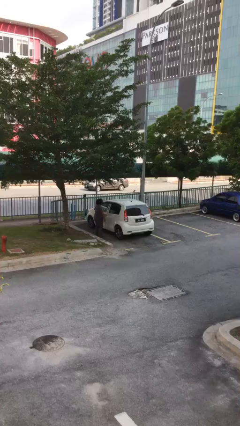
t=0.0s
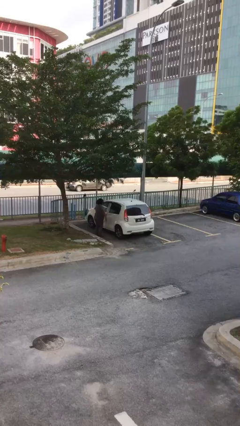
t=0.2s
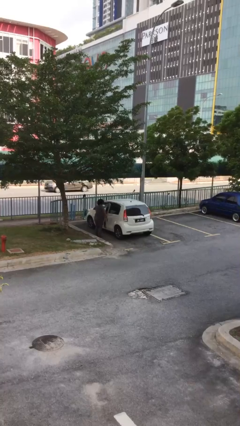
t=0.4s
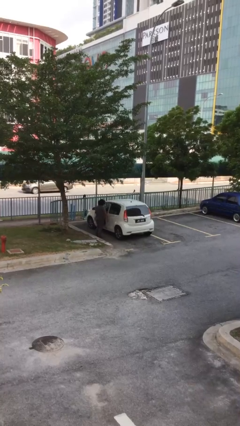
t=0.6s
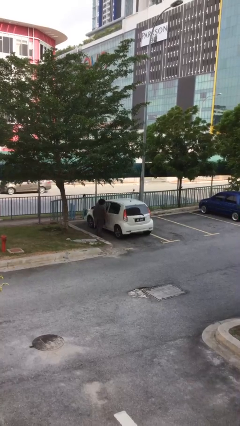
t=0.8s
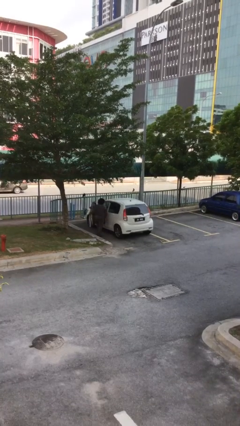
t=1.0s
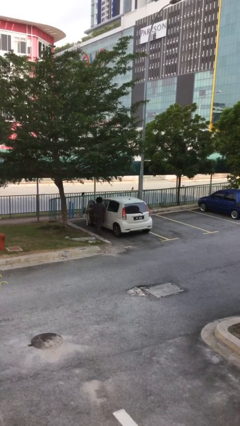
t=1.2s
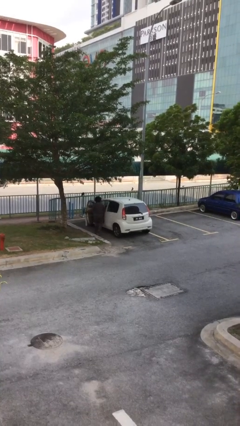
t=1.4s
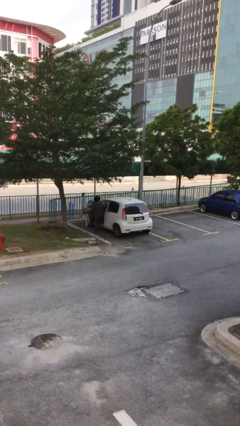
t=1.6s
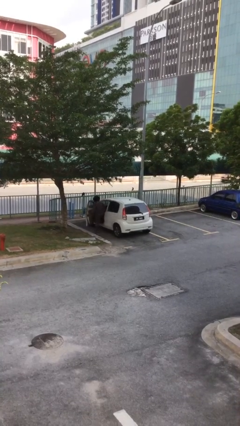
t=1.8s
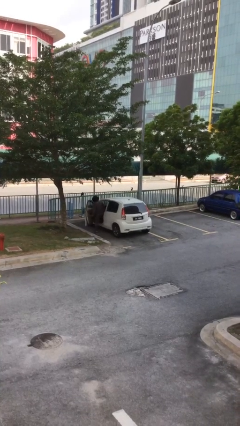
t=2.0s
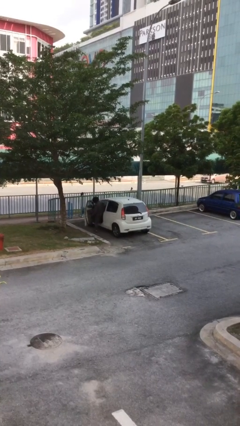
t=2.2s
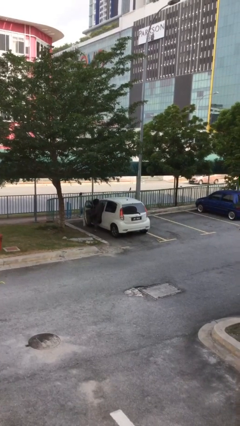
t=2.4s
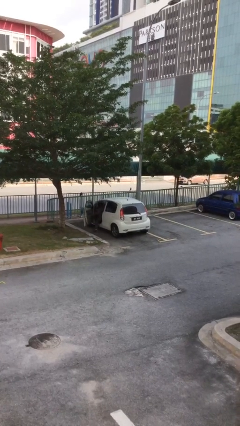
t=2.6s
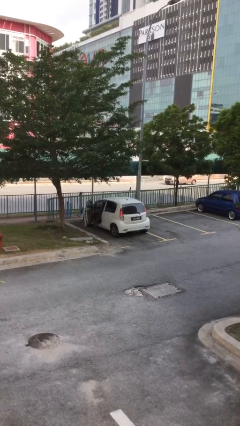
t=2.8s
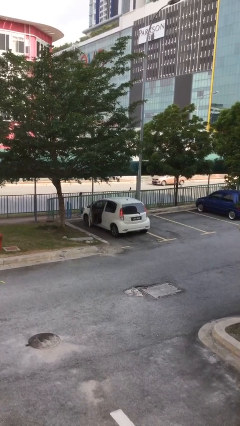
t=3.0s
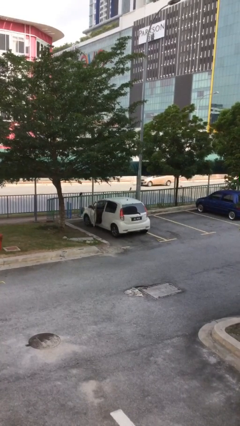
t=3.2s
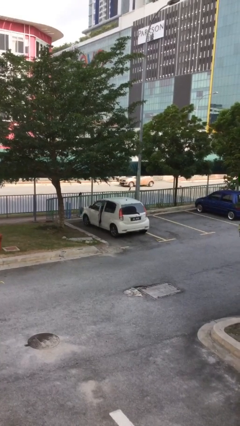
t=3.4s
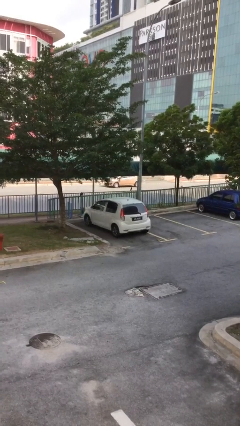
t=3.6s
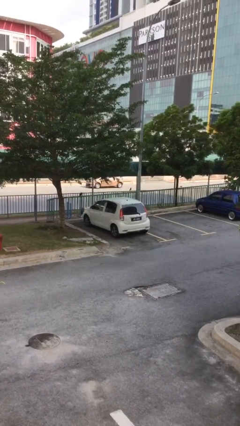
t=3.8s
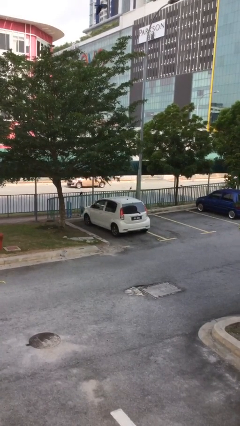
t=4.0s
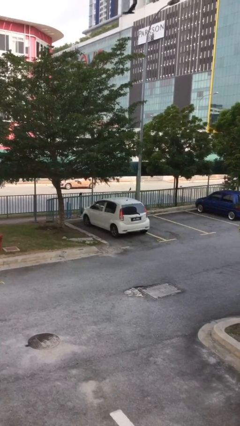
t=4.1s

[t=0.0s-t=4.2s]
car picks up person

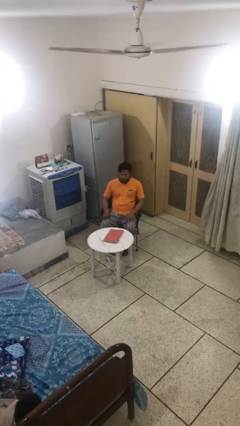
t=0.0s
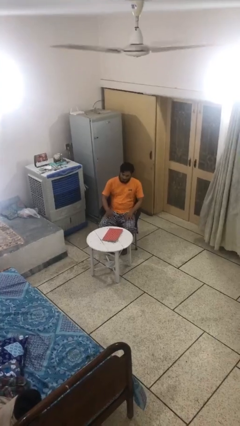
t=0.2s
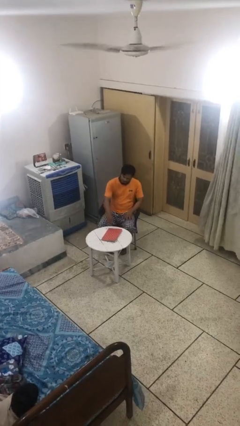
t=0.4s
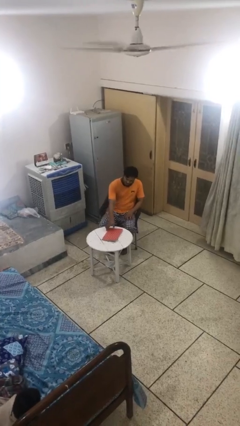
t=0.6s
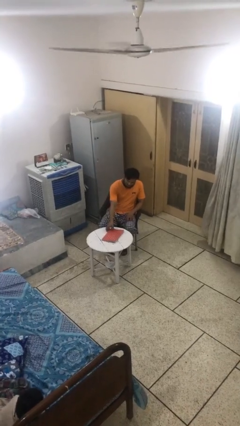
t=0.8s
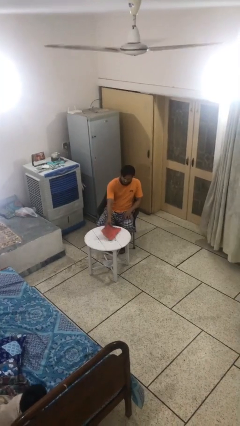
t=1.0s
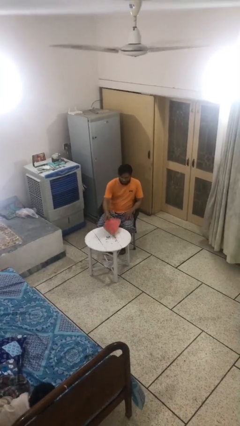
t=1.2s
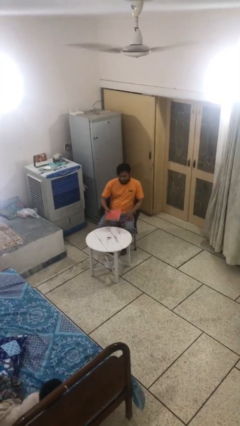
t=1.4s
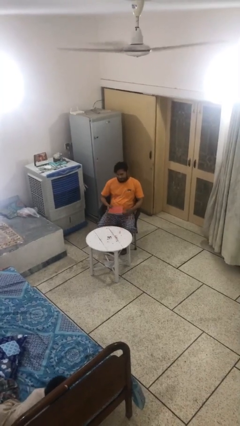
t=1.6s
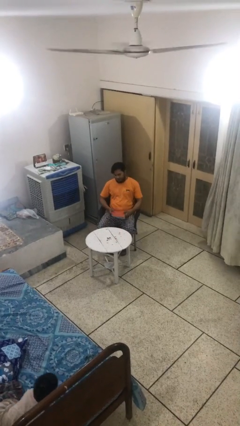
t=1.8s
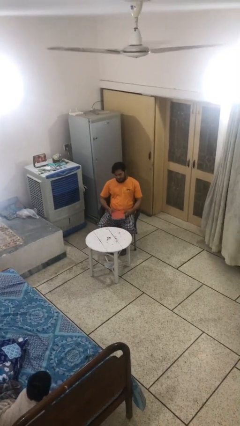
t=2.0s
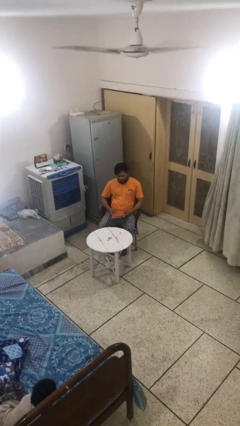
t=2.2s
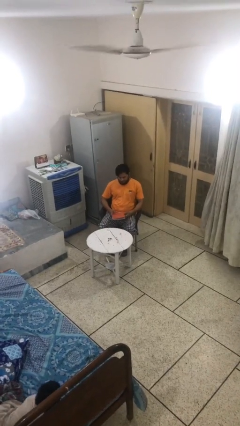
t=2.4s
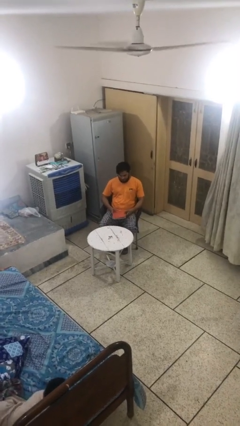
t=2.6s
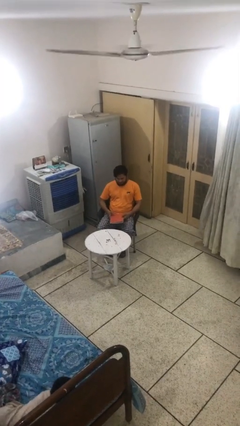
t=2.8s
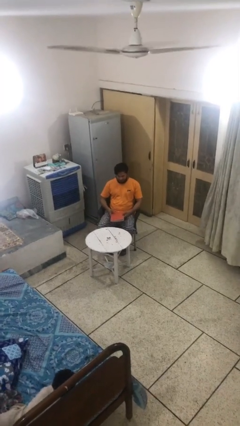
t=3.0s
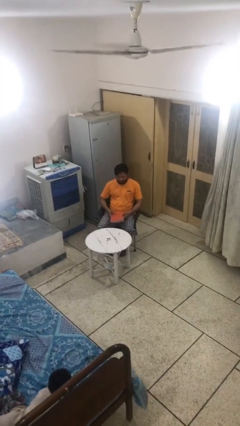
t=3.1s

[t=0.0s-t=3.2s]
person picks up object from table

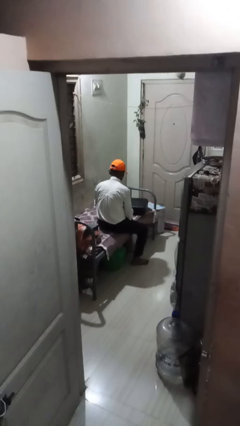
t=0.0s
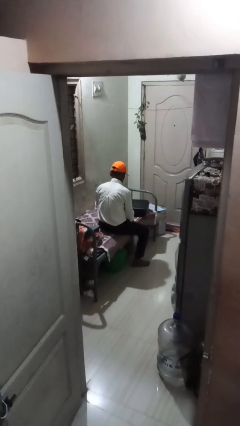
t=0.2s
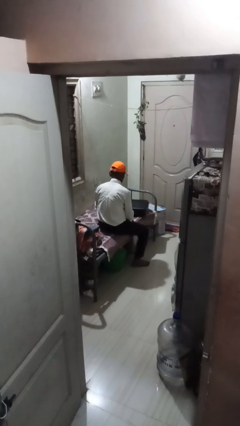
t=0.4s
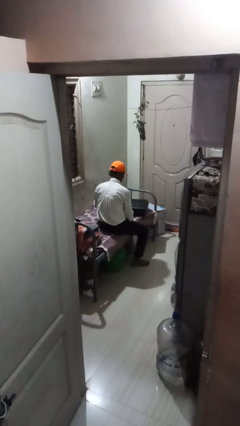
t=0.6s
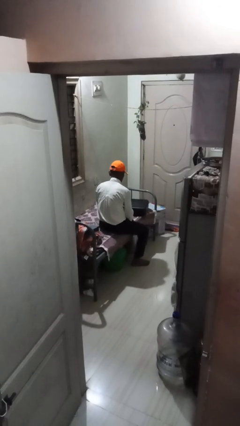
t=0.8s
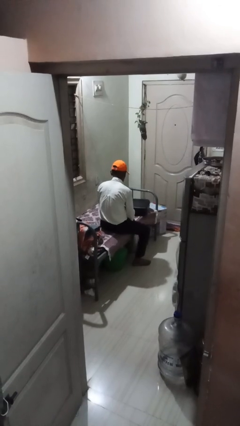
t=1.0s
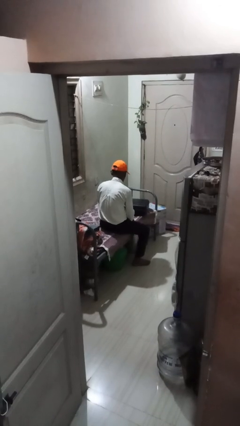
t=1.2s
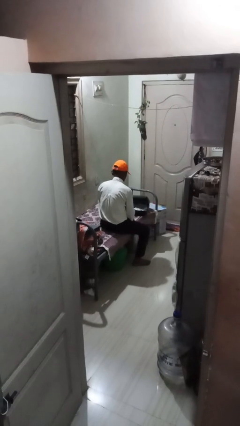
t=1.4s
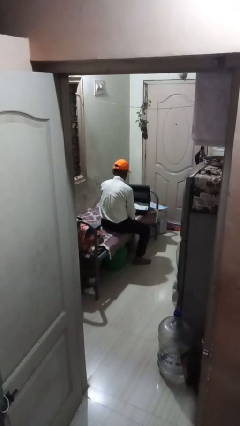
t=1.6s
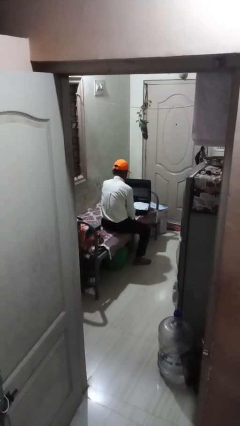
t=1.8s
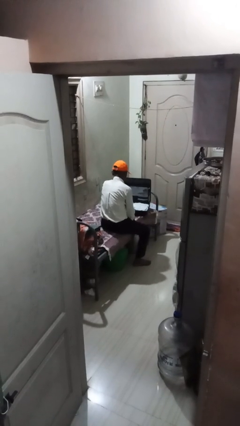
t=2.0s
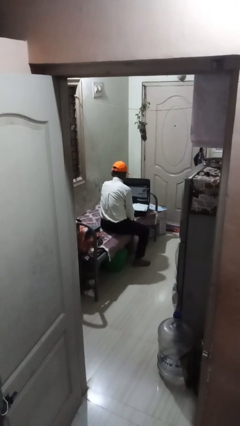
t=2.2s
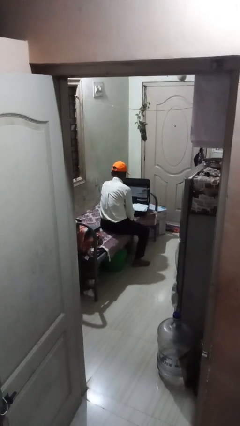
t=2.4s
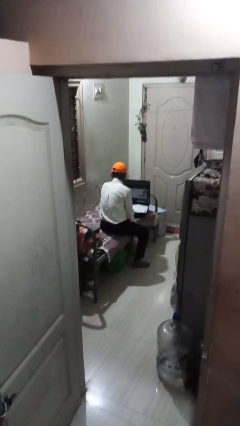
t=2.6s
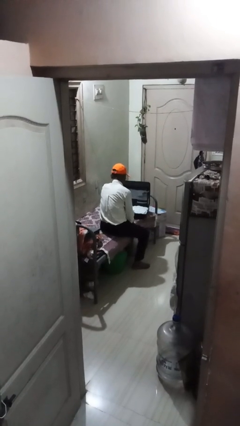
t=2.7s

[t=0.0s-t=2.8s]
person opens suitcase

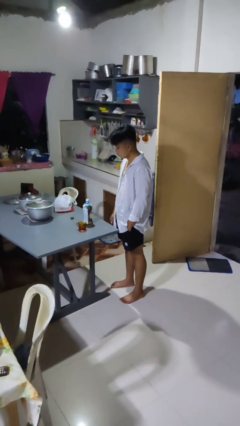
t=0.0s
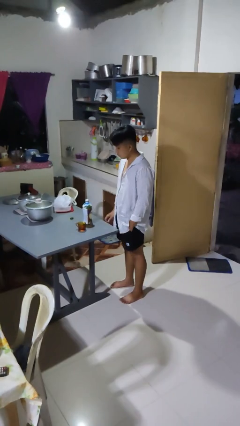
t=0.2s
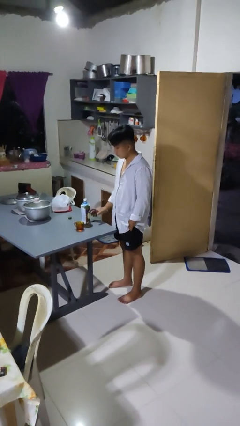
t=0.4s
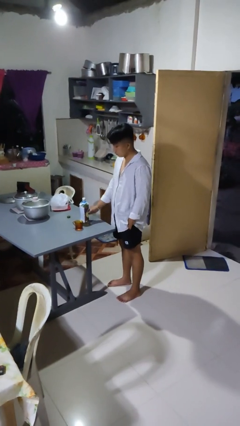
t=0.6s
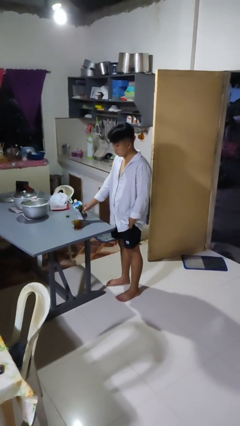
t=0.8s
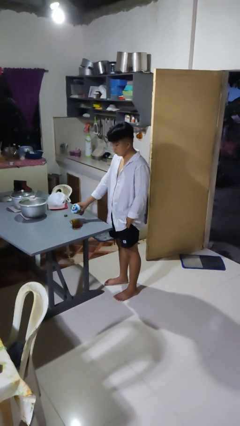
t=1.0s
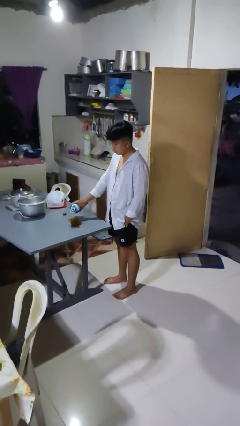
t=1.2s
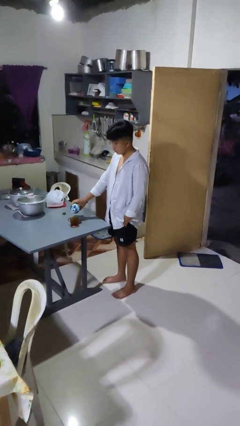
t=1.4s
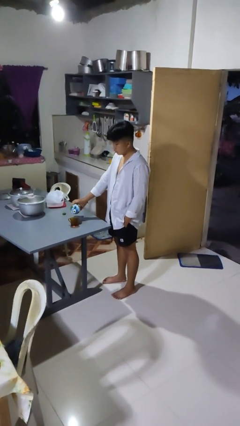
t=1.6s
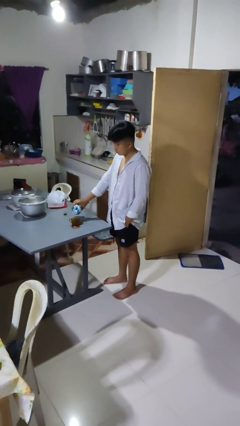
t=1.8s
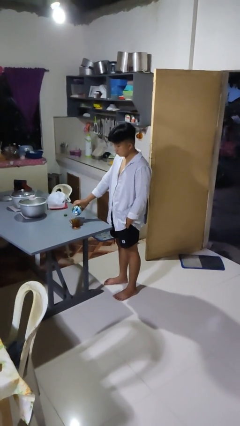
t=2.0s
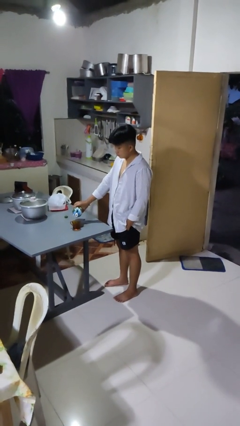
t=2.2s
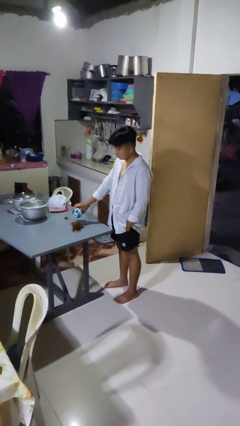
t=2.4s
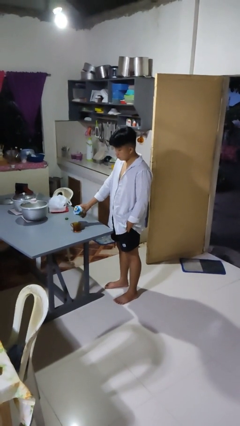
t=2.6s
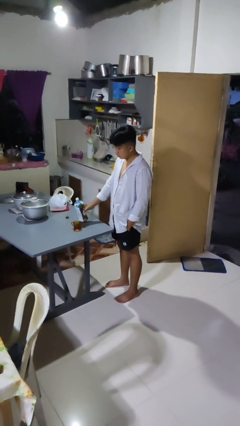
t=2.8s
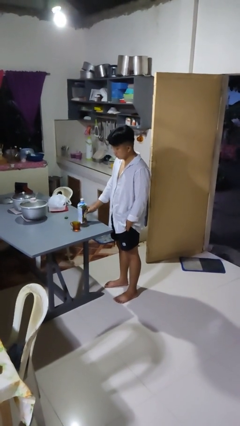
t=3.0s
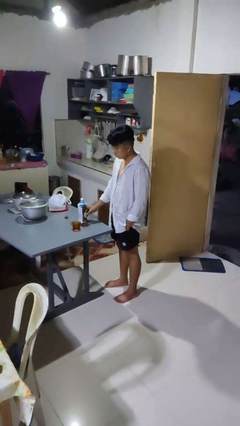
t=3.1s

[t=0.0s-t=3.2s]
person pours liquid into cup

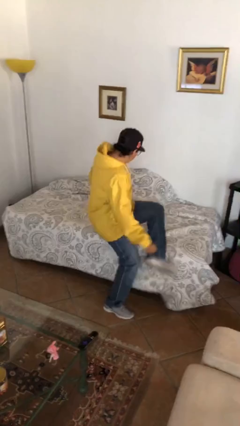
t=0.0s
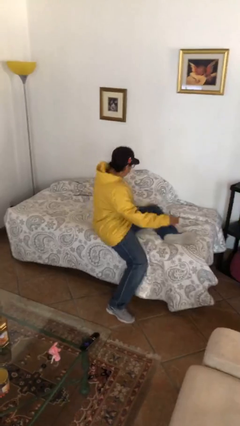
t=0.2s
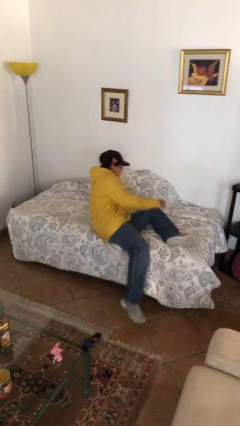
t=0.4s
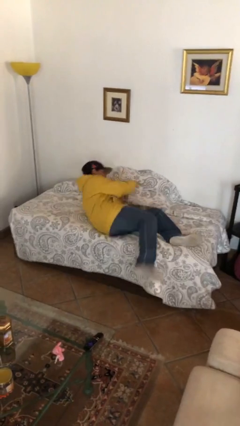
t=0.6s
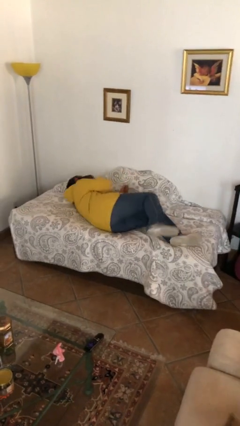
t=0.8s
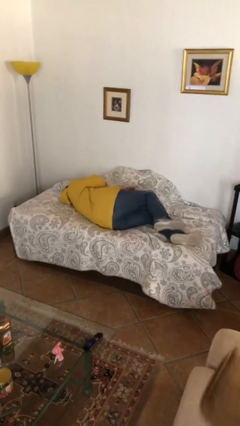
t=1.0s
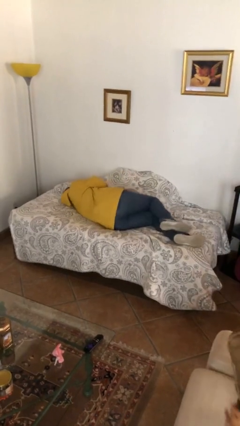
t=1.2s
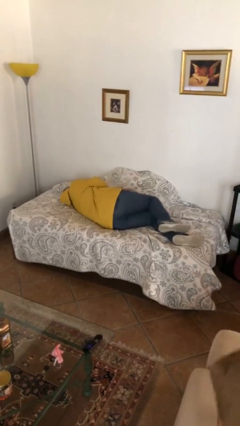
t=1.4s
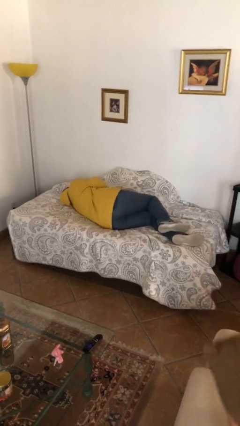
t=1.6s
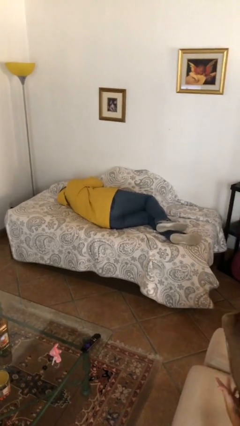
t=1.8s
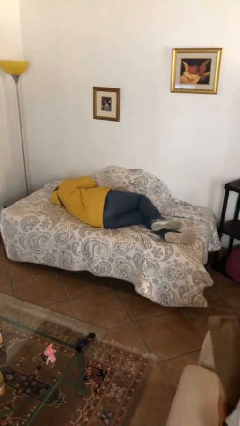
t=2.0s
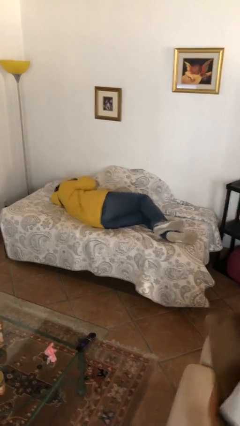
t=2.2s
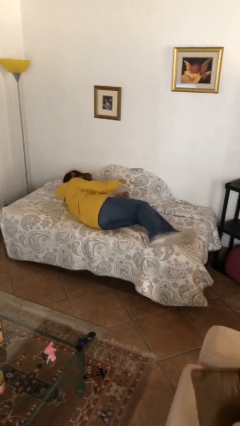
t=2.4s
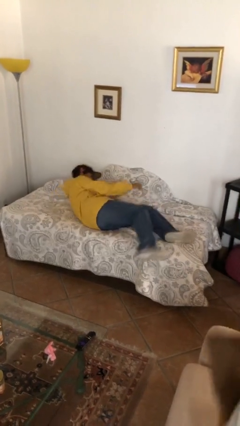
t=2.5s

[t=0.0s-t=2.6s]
person lies down on bed

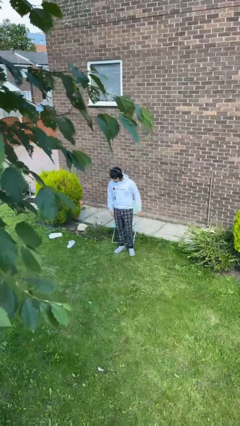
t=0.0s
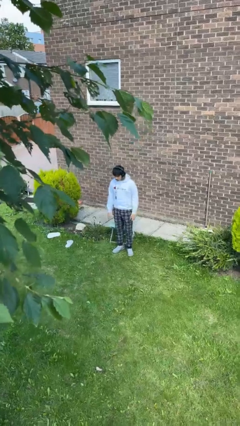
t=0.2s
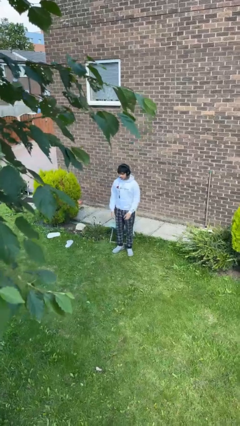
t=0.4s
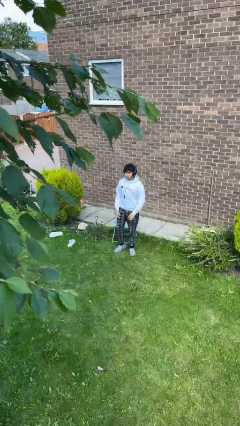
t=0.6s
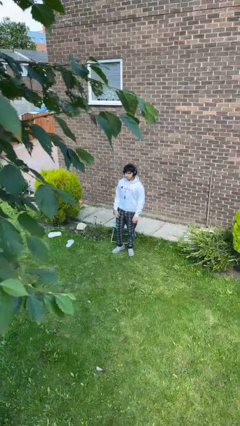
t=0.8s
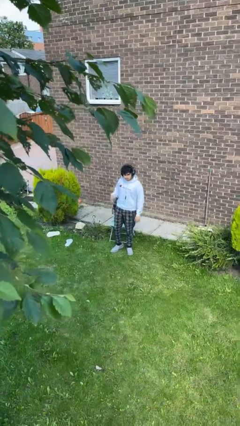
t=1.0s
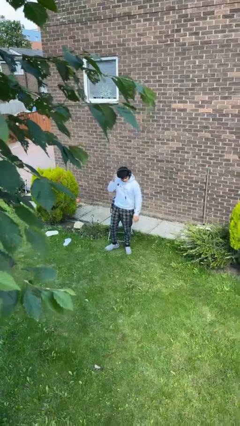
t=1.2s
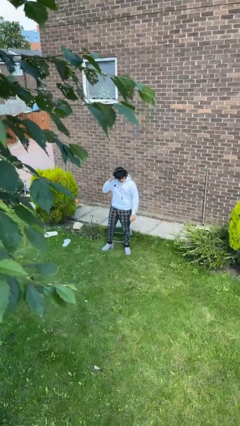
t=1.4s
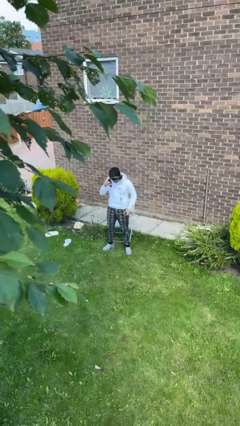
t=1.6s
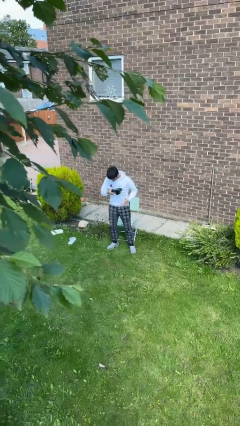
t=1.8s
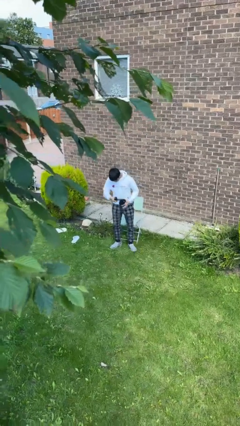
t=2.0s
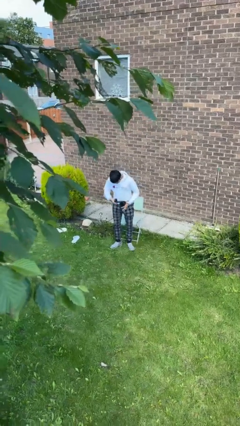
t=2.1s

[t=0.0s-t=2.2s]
person takes off headphones
